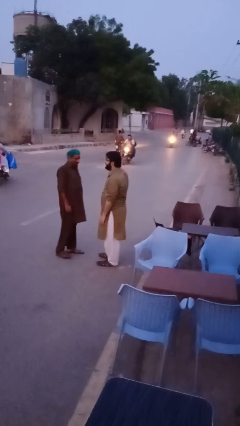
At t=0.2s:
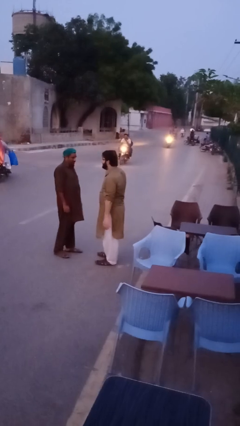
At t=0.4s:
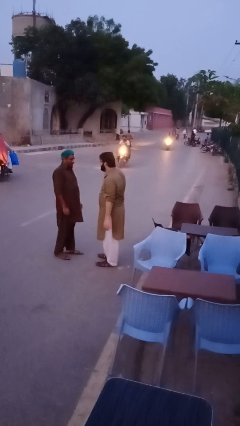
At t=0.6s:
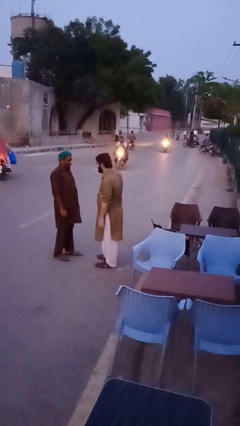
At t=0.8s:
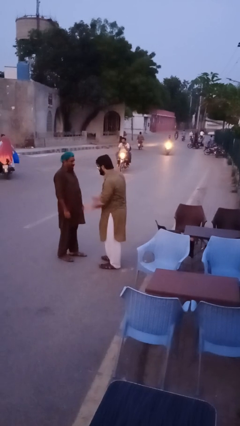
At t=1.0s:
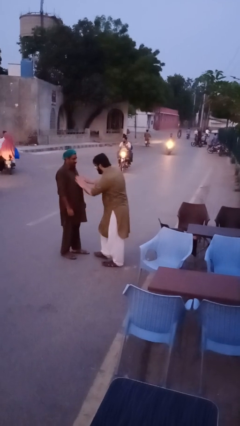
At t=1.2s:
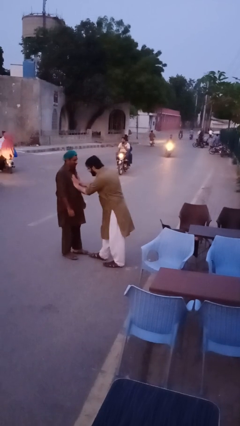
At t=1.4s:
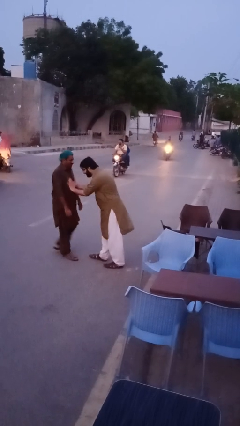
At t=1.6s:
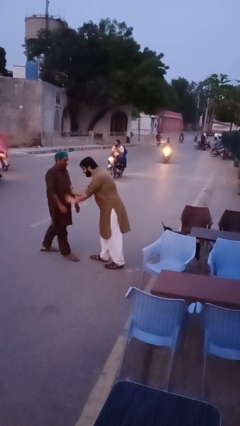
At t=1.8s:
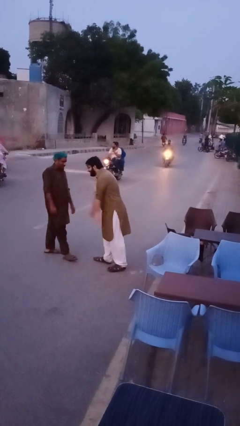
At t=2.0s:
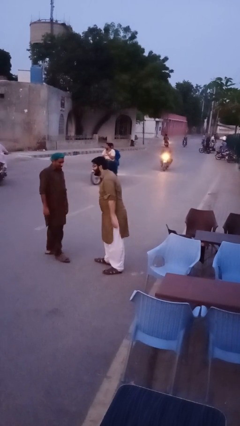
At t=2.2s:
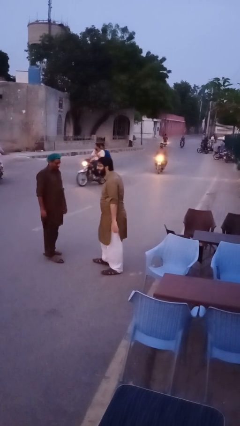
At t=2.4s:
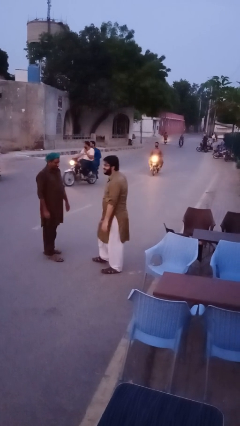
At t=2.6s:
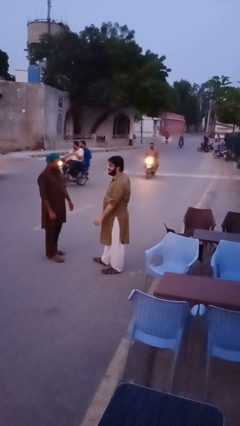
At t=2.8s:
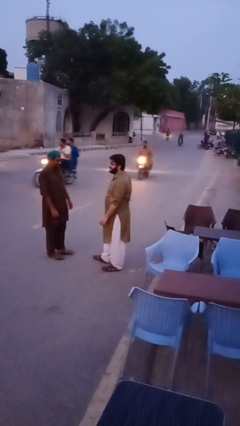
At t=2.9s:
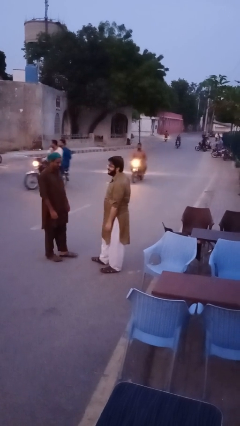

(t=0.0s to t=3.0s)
person shoves person

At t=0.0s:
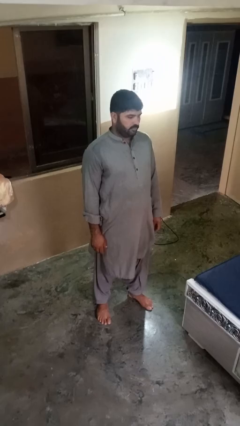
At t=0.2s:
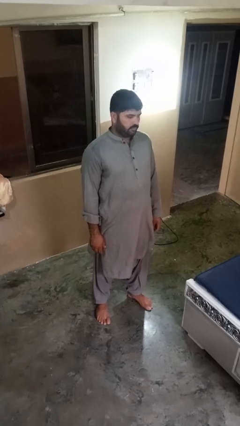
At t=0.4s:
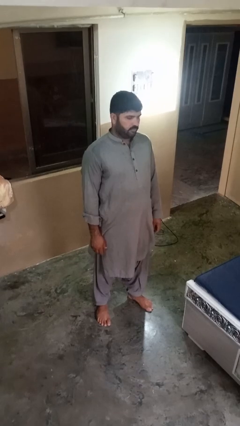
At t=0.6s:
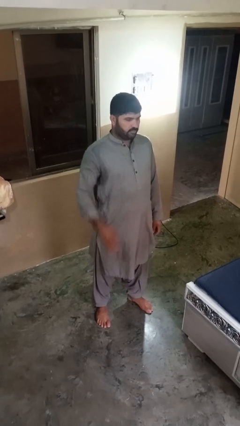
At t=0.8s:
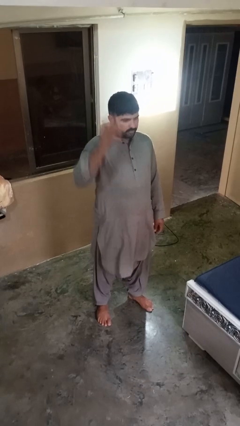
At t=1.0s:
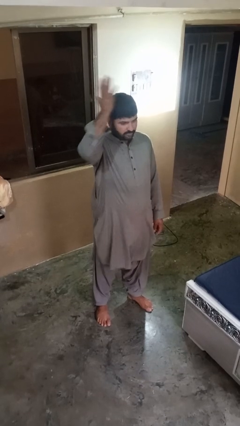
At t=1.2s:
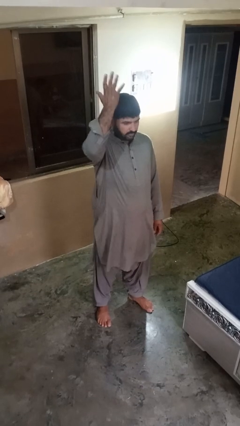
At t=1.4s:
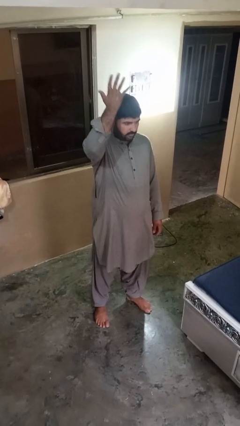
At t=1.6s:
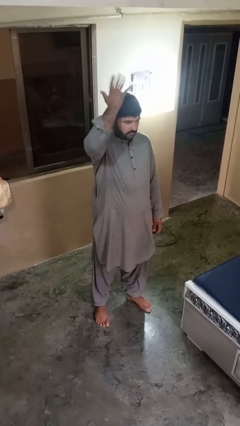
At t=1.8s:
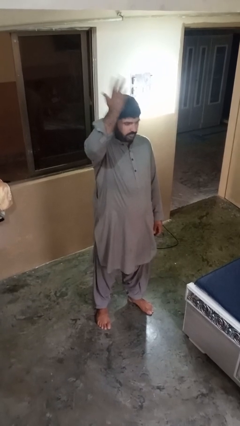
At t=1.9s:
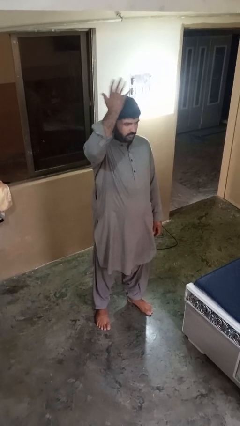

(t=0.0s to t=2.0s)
person pats head

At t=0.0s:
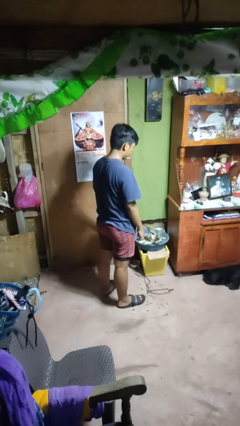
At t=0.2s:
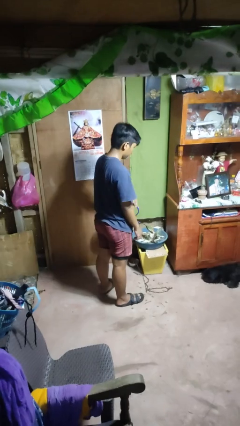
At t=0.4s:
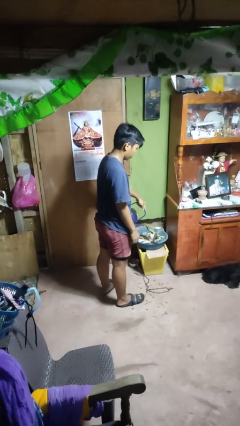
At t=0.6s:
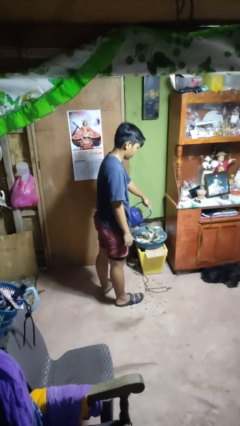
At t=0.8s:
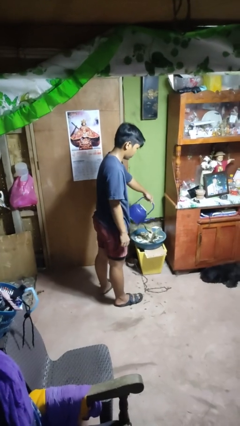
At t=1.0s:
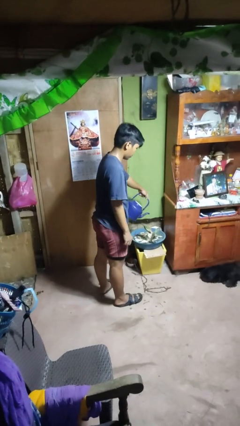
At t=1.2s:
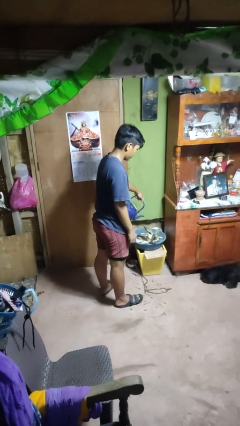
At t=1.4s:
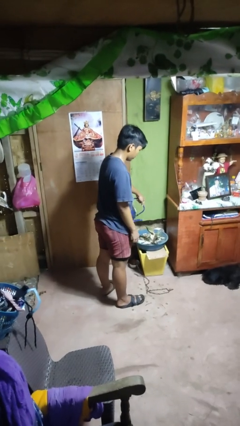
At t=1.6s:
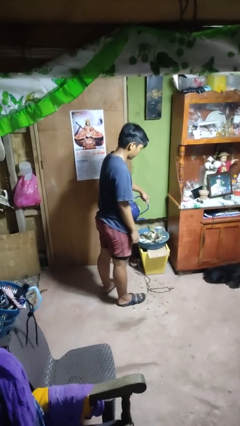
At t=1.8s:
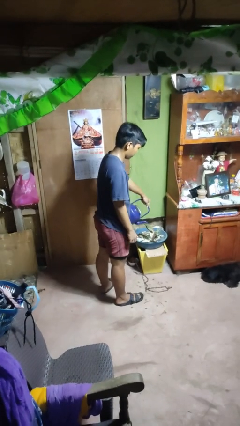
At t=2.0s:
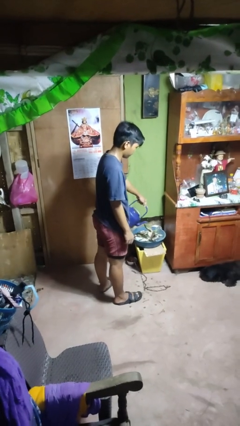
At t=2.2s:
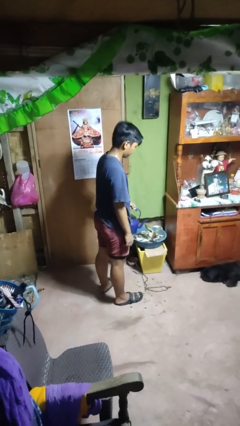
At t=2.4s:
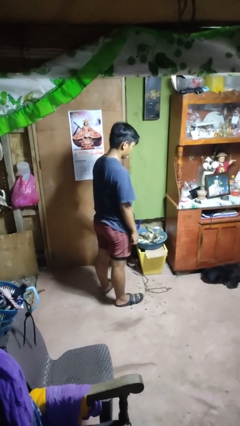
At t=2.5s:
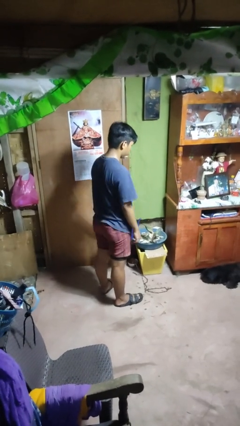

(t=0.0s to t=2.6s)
person waters houseplant

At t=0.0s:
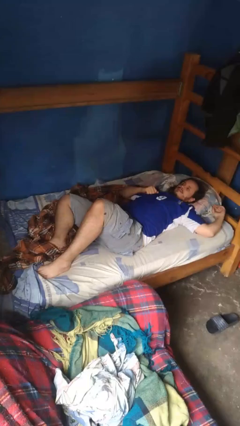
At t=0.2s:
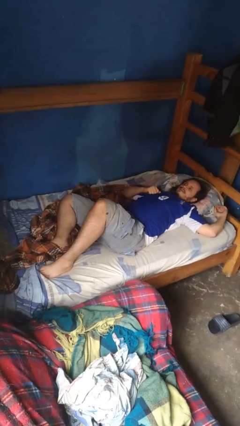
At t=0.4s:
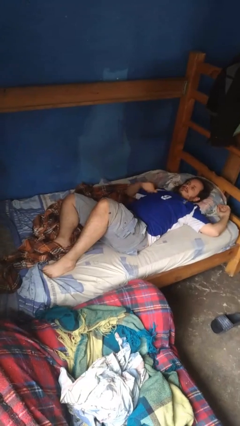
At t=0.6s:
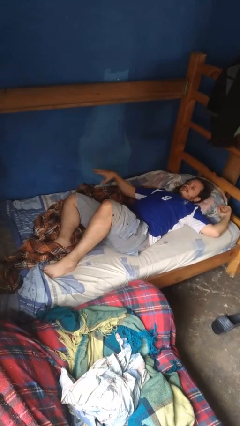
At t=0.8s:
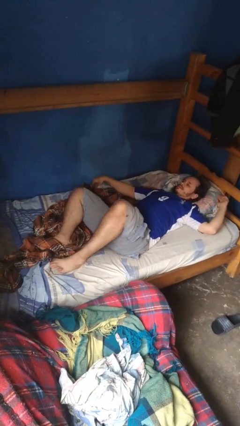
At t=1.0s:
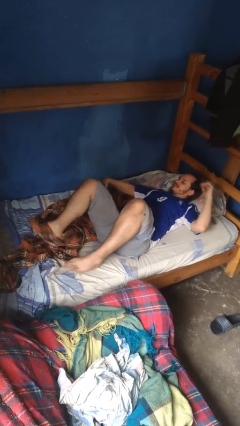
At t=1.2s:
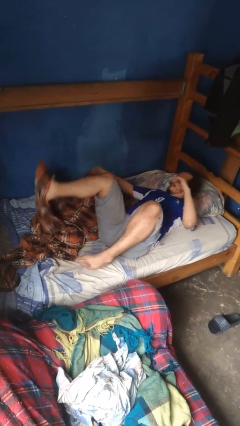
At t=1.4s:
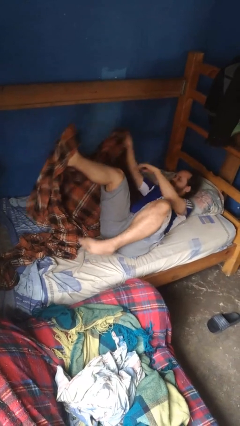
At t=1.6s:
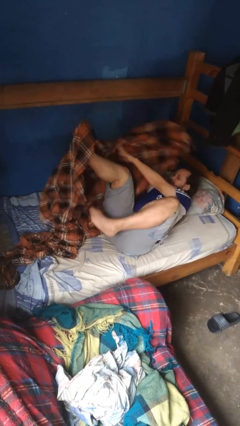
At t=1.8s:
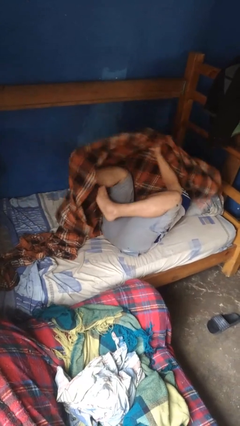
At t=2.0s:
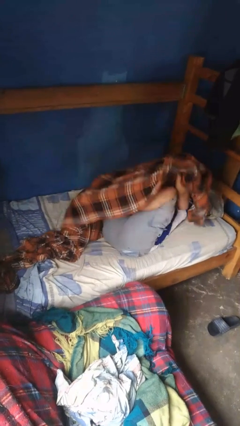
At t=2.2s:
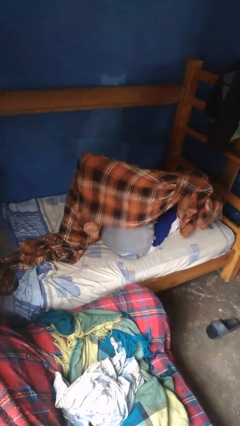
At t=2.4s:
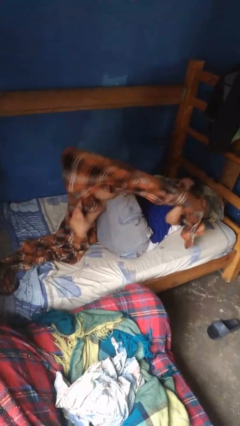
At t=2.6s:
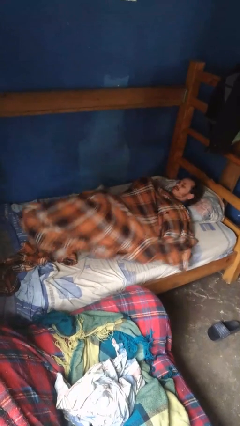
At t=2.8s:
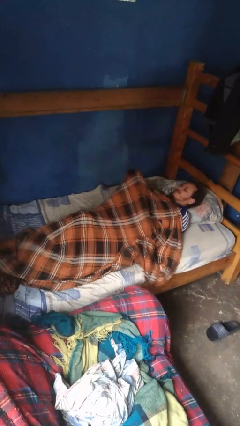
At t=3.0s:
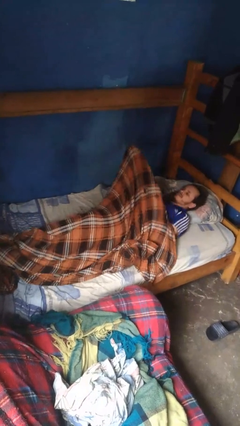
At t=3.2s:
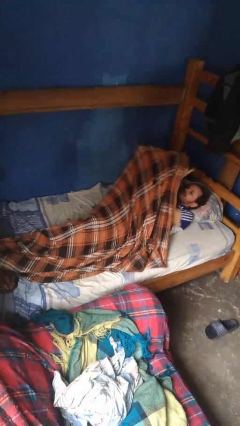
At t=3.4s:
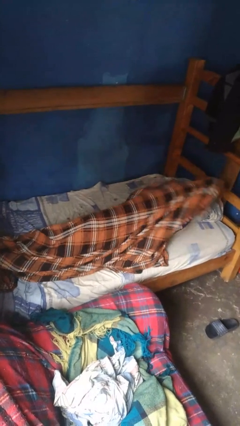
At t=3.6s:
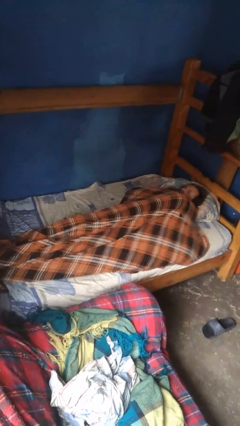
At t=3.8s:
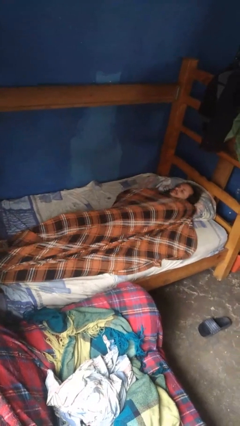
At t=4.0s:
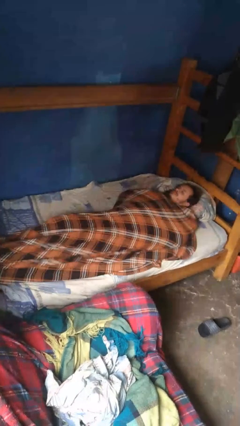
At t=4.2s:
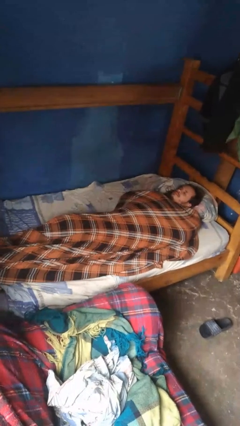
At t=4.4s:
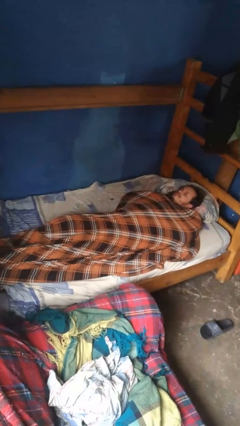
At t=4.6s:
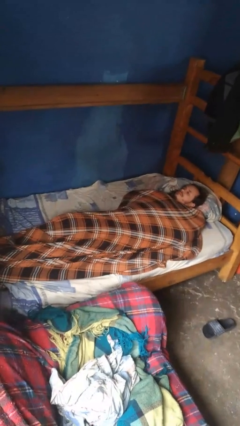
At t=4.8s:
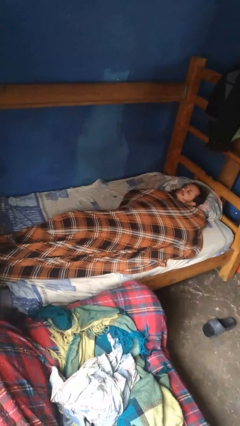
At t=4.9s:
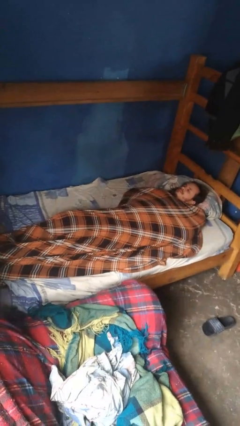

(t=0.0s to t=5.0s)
person covers with bedsheets

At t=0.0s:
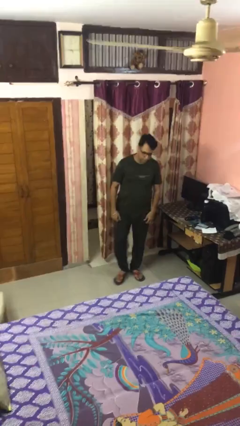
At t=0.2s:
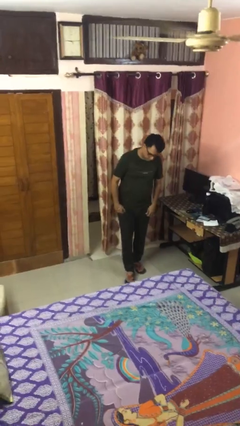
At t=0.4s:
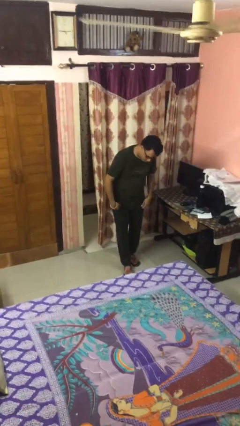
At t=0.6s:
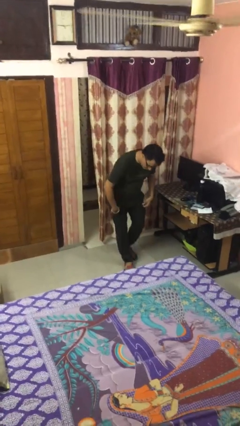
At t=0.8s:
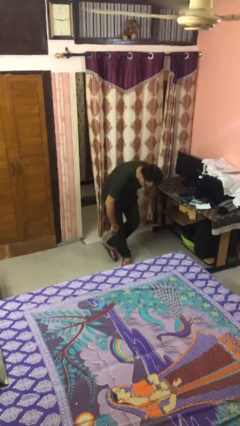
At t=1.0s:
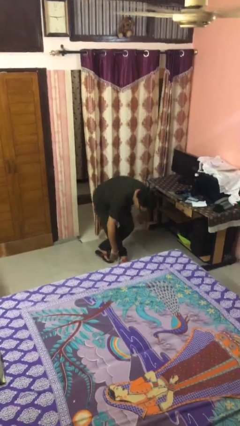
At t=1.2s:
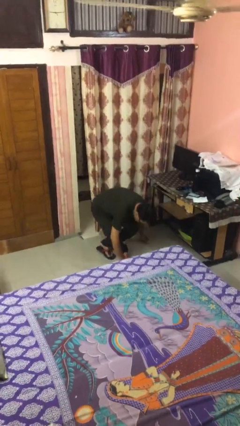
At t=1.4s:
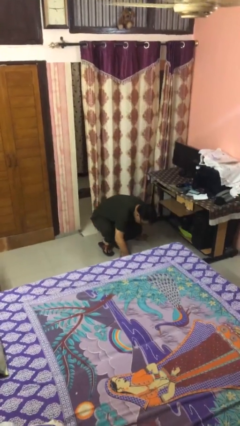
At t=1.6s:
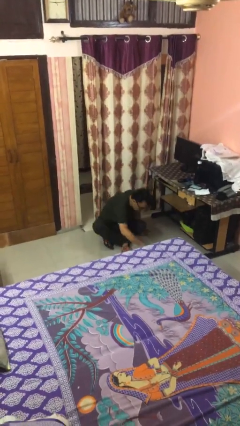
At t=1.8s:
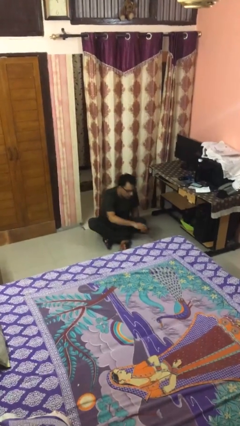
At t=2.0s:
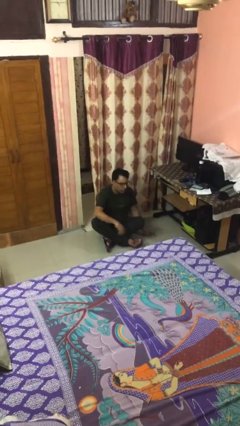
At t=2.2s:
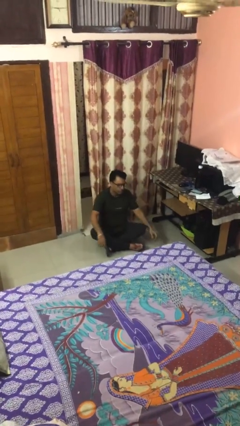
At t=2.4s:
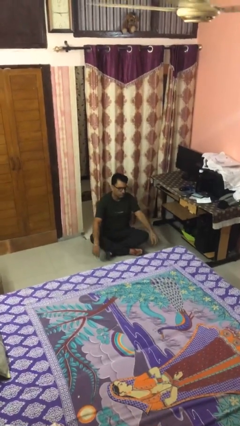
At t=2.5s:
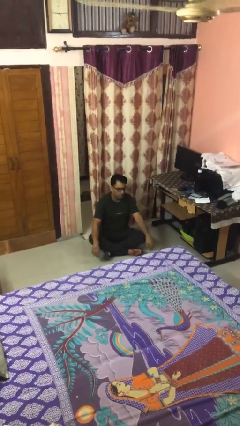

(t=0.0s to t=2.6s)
person sits crisscross

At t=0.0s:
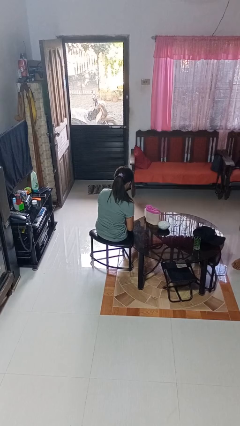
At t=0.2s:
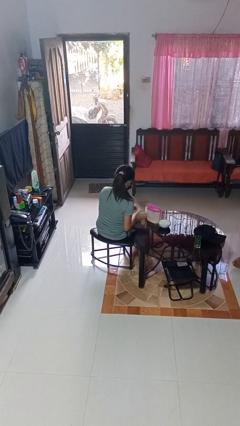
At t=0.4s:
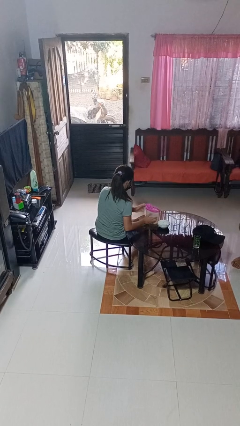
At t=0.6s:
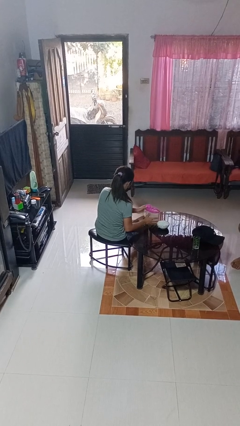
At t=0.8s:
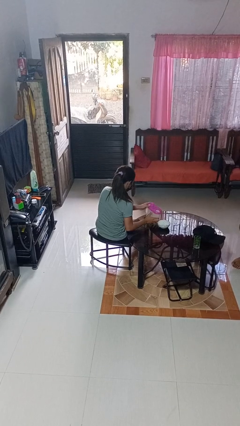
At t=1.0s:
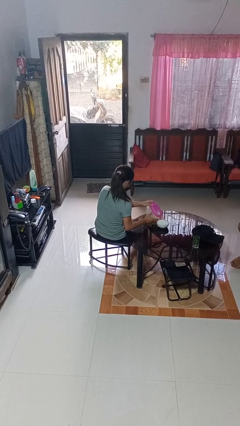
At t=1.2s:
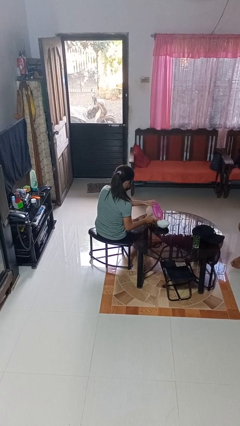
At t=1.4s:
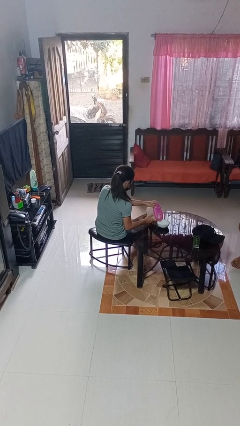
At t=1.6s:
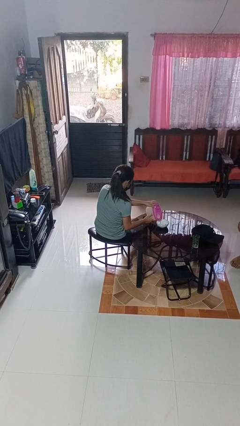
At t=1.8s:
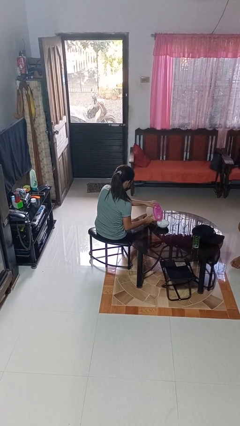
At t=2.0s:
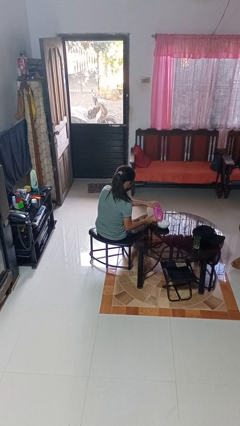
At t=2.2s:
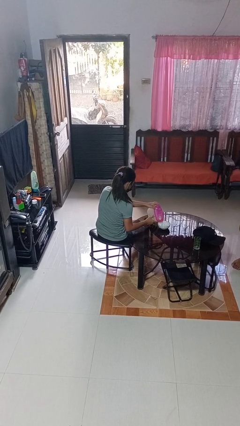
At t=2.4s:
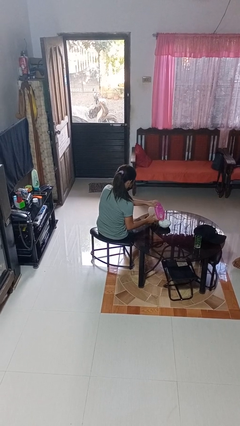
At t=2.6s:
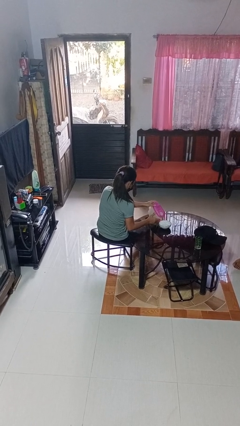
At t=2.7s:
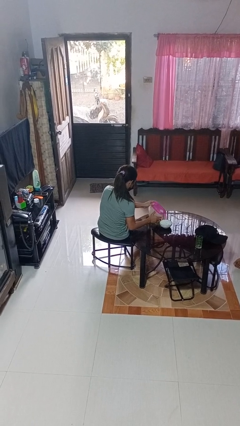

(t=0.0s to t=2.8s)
person pours into bowl
